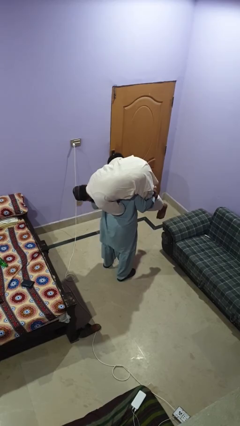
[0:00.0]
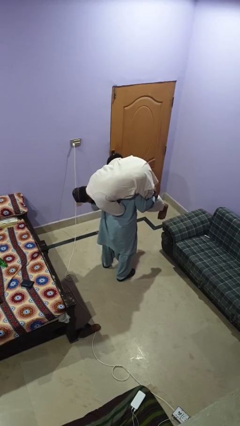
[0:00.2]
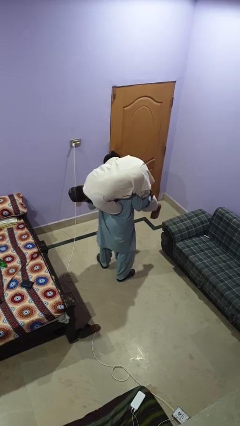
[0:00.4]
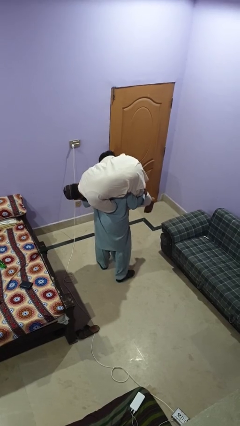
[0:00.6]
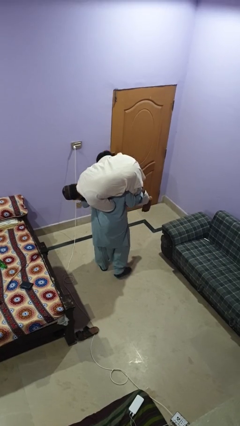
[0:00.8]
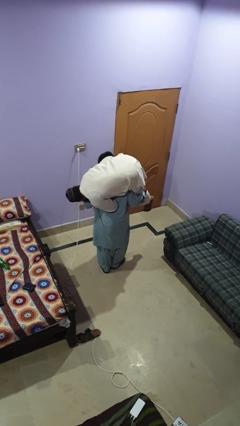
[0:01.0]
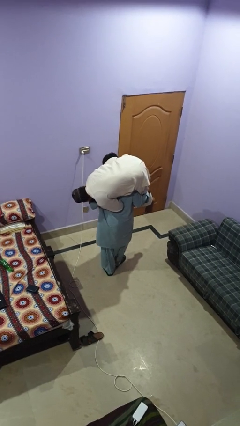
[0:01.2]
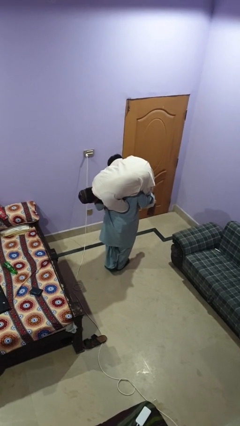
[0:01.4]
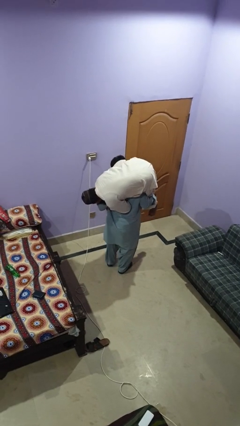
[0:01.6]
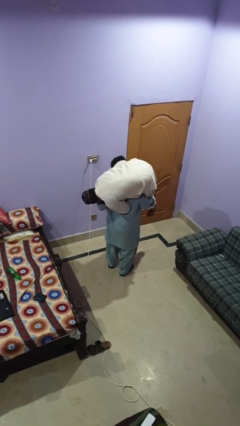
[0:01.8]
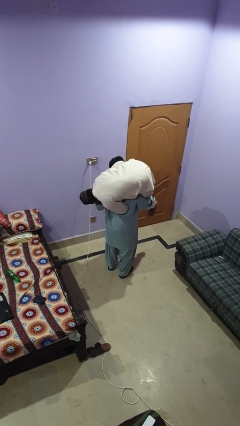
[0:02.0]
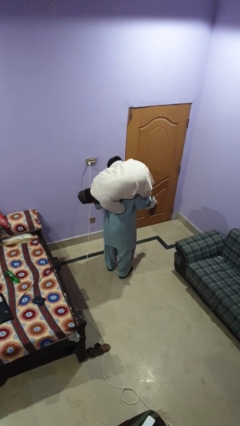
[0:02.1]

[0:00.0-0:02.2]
person carries person on shoulders

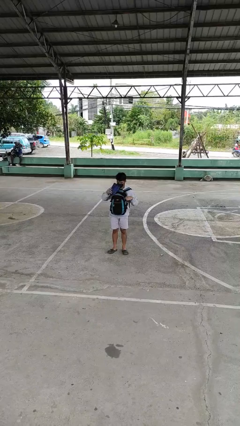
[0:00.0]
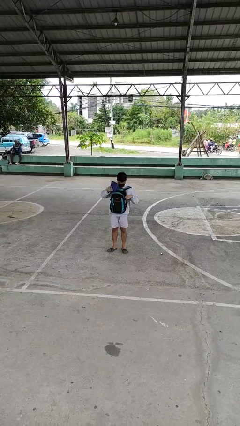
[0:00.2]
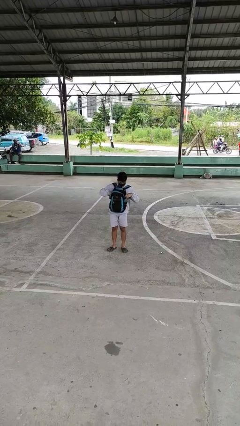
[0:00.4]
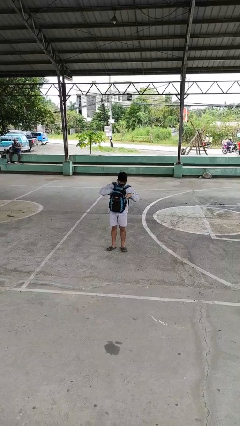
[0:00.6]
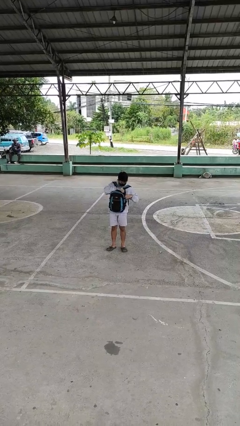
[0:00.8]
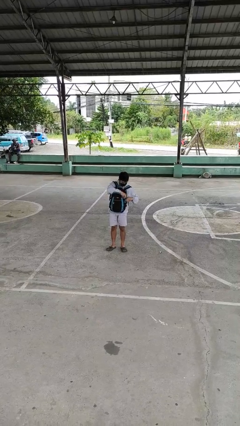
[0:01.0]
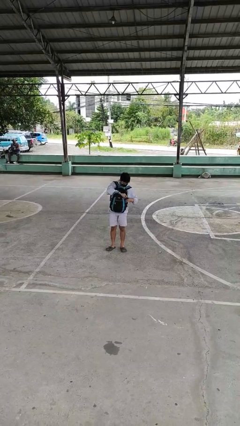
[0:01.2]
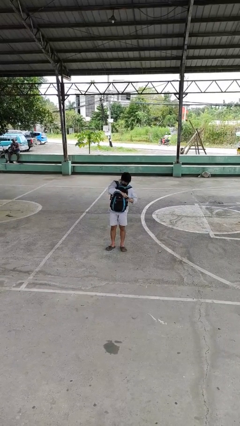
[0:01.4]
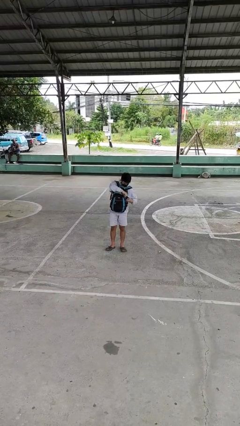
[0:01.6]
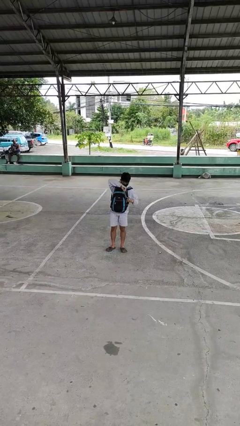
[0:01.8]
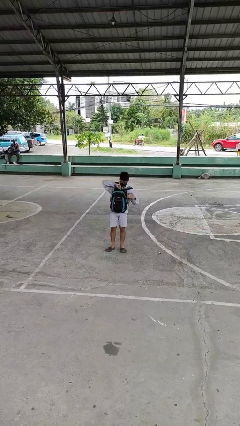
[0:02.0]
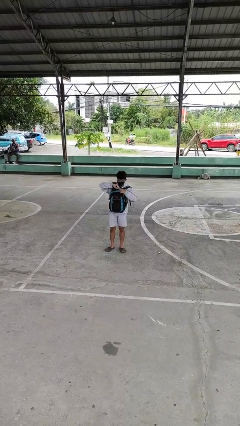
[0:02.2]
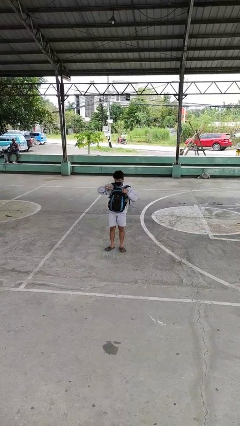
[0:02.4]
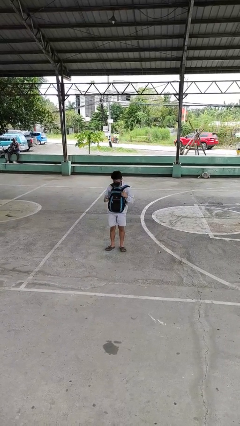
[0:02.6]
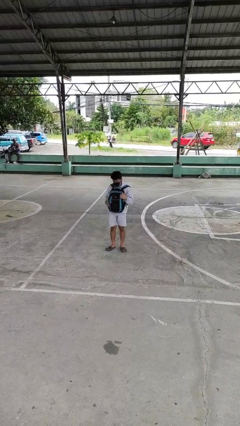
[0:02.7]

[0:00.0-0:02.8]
person puts object into backpack

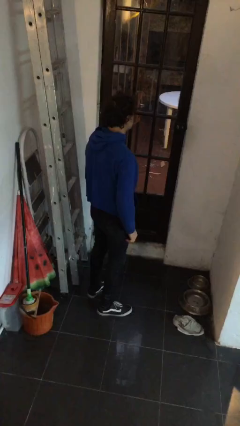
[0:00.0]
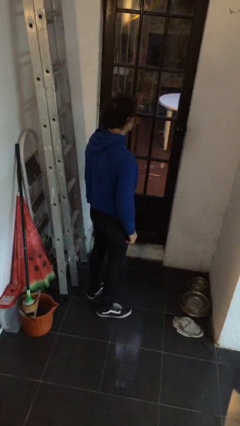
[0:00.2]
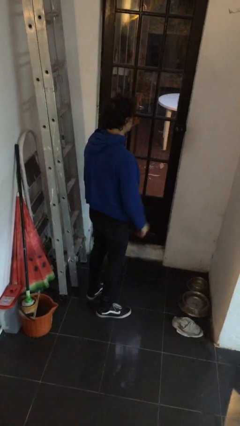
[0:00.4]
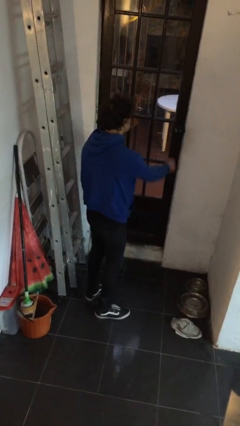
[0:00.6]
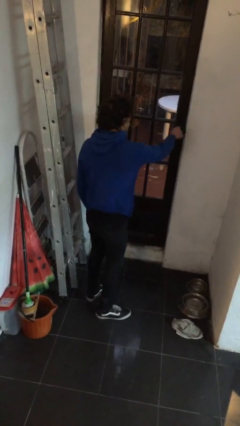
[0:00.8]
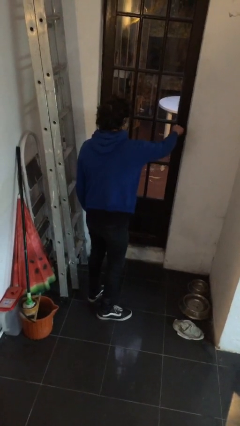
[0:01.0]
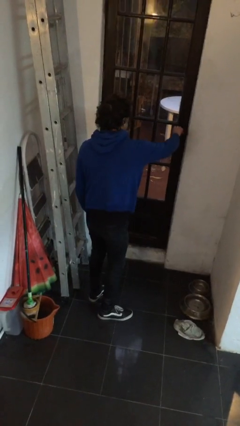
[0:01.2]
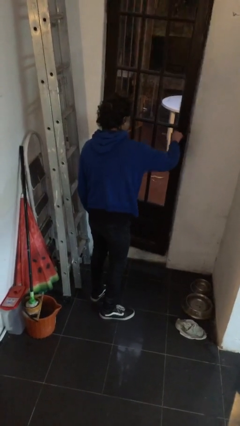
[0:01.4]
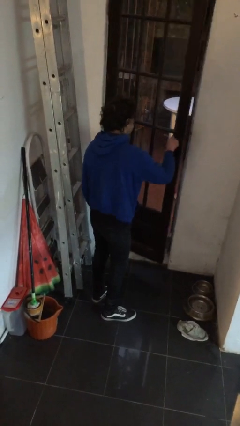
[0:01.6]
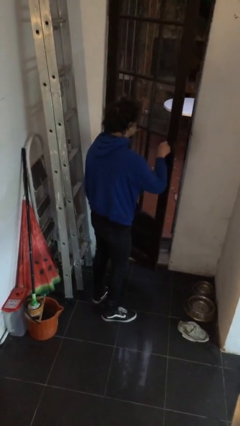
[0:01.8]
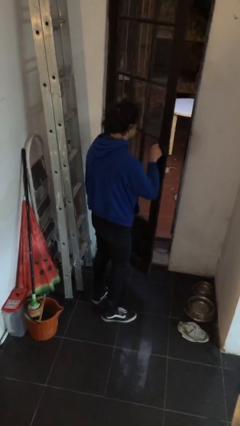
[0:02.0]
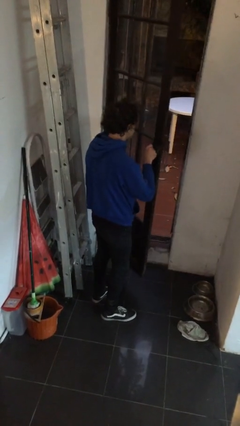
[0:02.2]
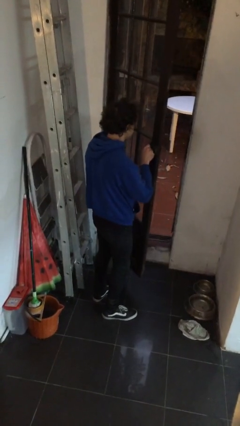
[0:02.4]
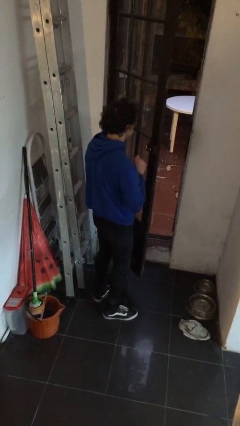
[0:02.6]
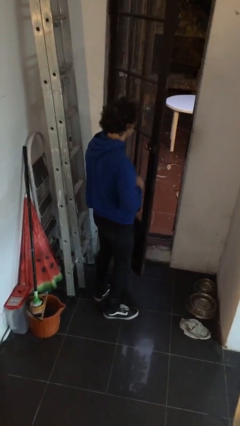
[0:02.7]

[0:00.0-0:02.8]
person opens facility door

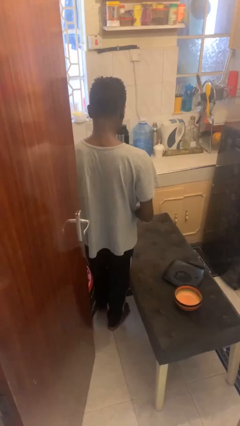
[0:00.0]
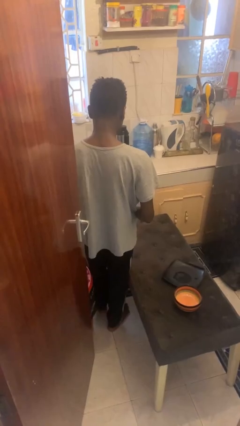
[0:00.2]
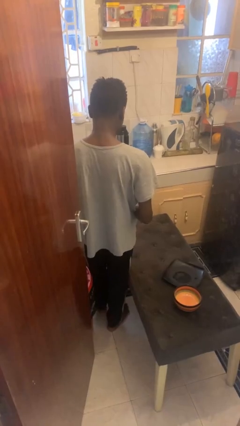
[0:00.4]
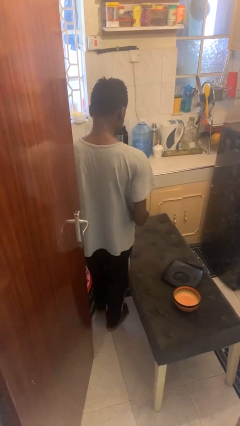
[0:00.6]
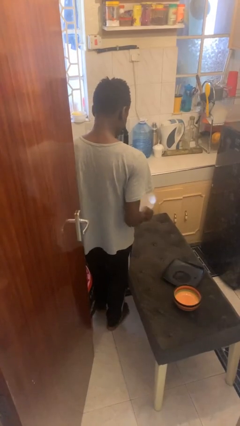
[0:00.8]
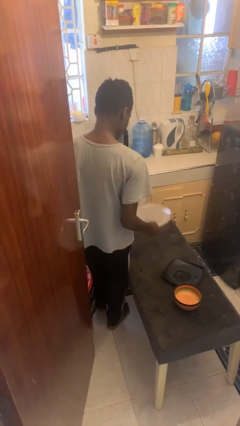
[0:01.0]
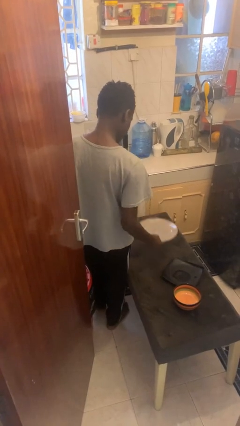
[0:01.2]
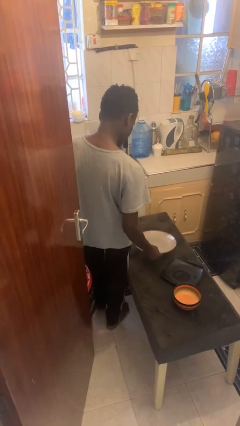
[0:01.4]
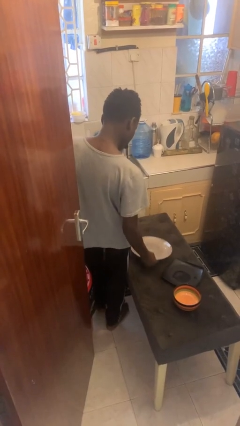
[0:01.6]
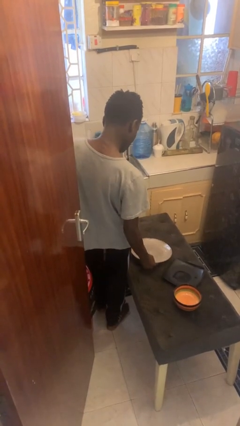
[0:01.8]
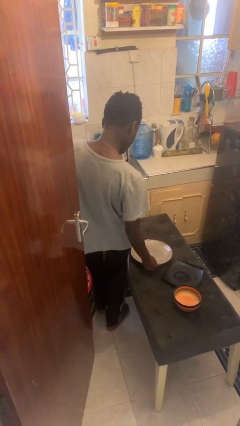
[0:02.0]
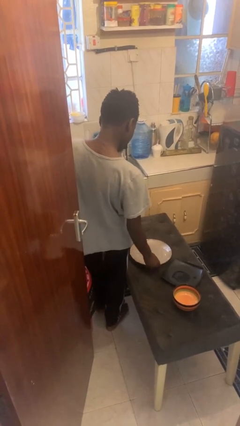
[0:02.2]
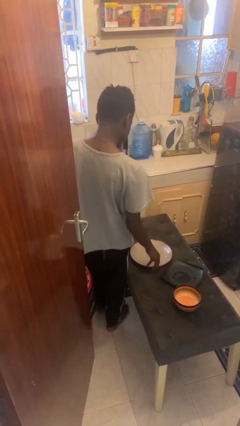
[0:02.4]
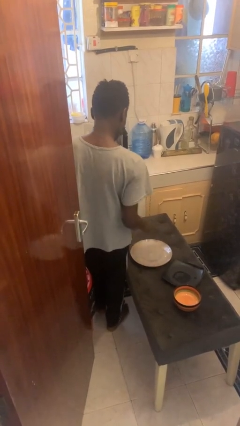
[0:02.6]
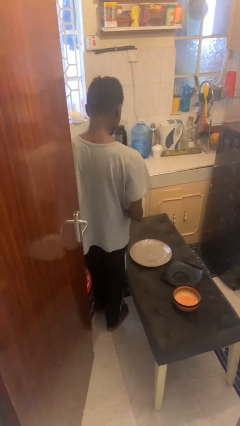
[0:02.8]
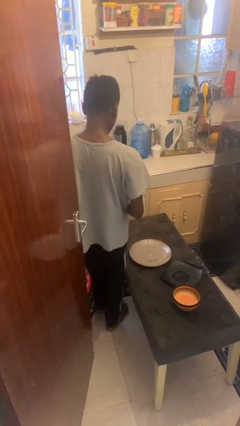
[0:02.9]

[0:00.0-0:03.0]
person sets table

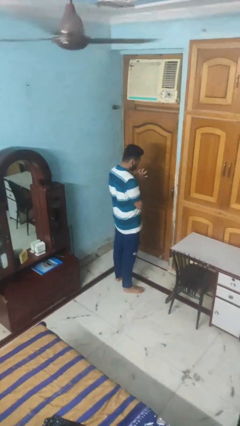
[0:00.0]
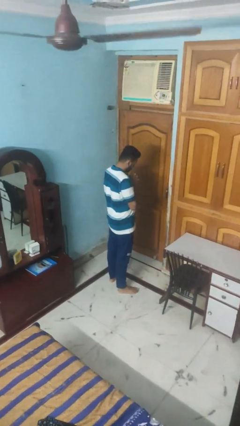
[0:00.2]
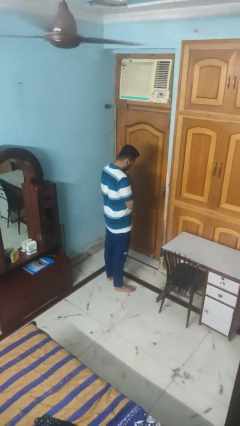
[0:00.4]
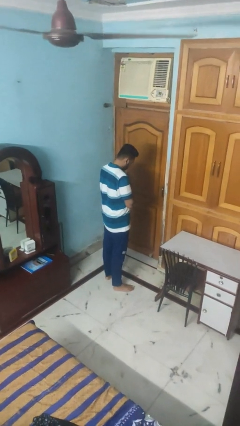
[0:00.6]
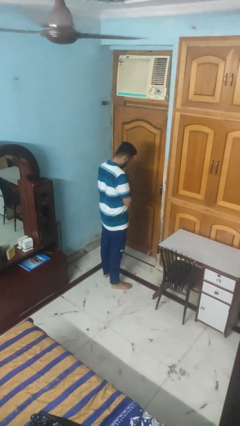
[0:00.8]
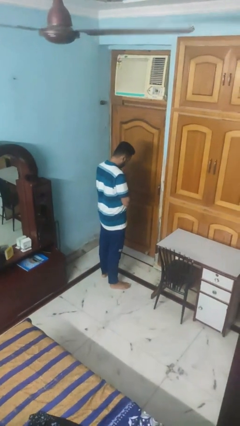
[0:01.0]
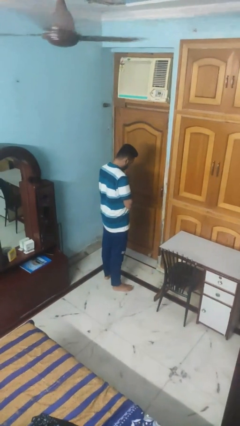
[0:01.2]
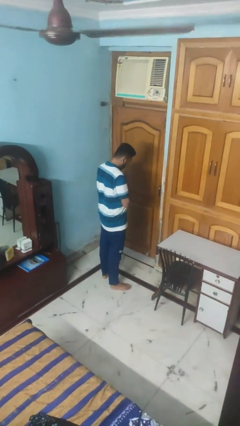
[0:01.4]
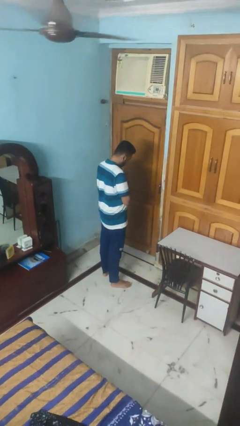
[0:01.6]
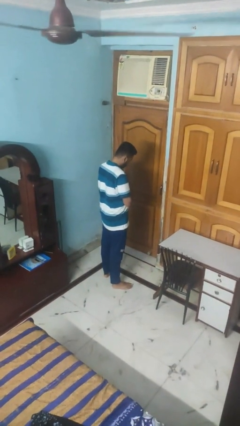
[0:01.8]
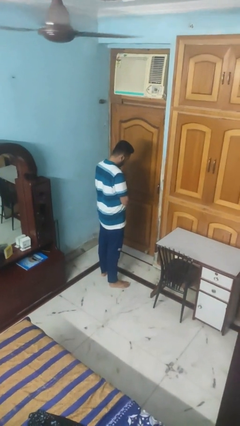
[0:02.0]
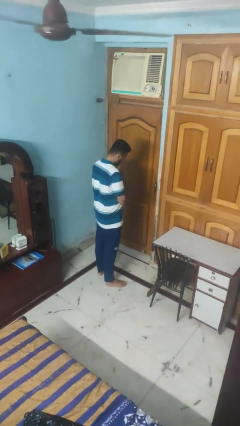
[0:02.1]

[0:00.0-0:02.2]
person prays

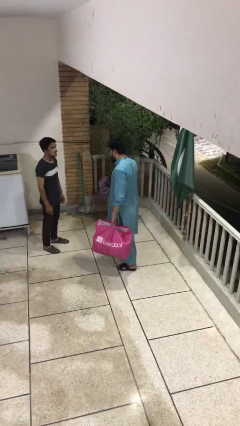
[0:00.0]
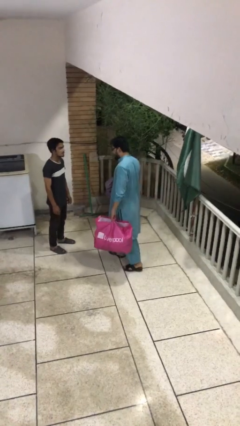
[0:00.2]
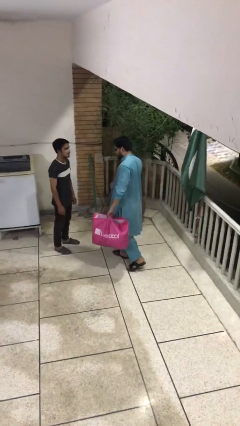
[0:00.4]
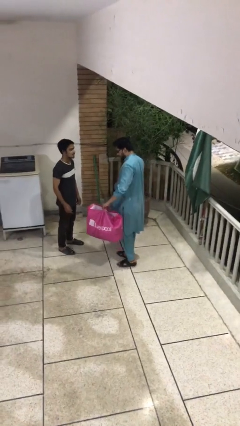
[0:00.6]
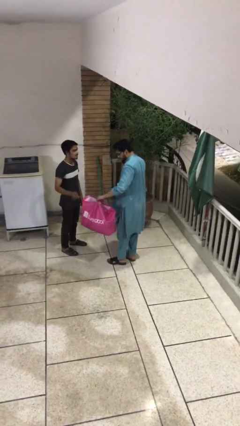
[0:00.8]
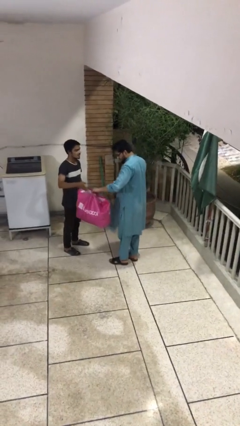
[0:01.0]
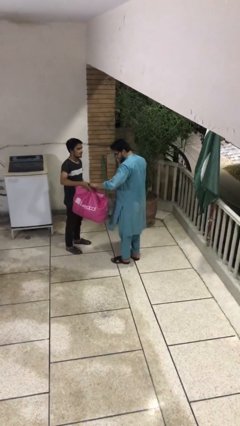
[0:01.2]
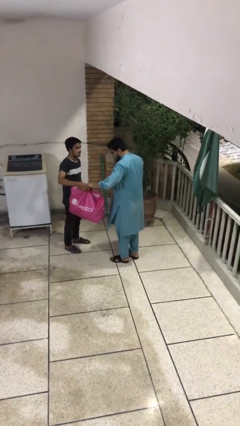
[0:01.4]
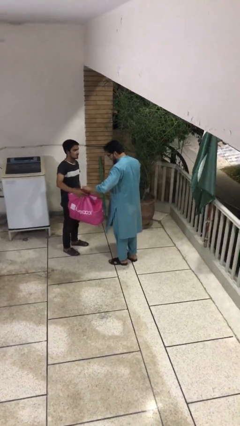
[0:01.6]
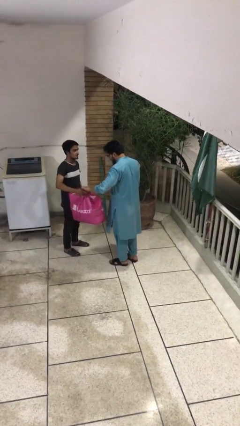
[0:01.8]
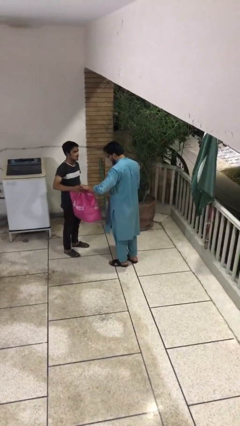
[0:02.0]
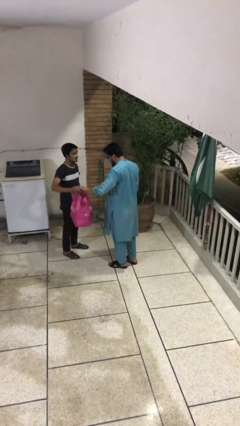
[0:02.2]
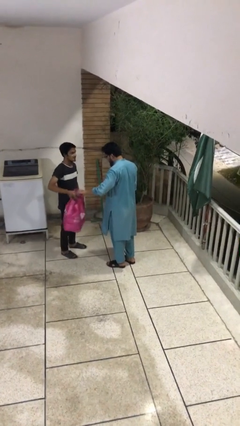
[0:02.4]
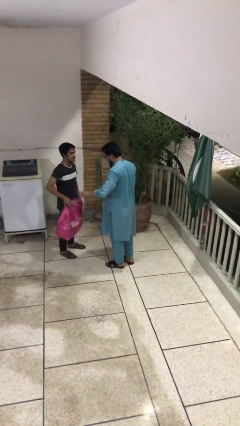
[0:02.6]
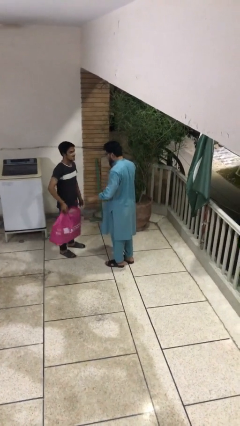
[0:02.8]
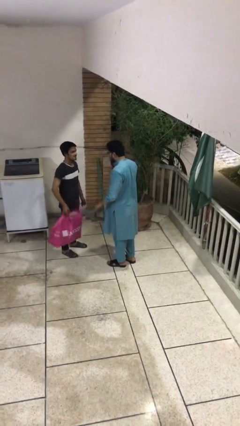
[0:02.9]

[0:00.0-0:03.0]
person transfers object to person

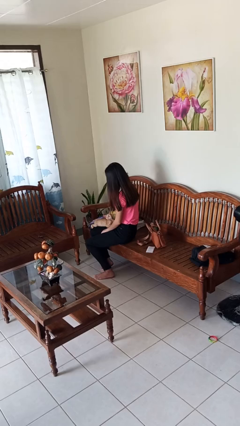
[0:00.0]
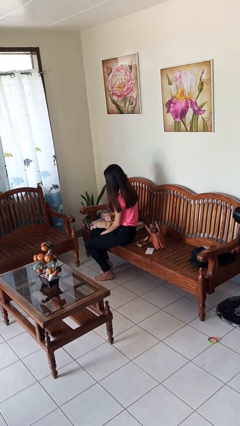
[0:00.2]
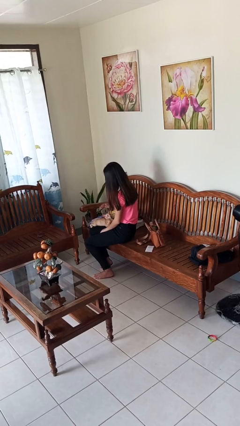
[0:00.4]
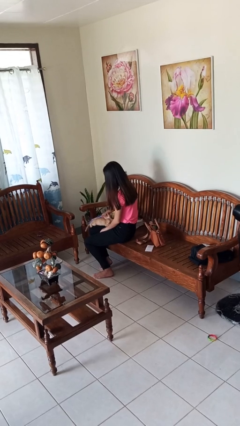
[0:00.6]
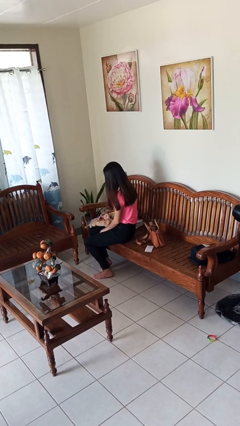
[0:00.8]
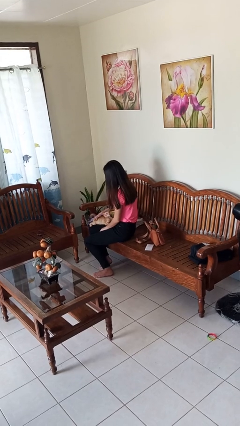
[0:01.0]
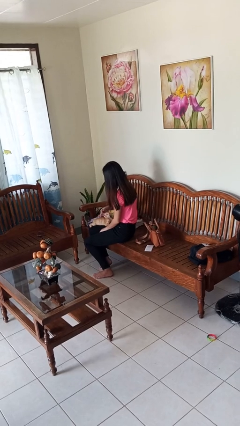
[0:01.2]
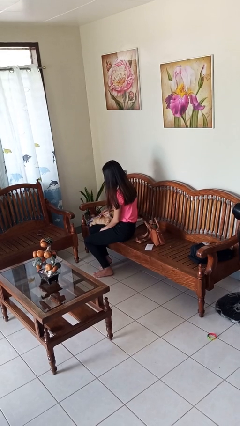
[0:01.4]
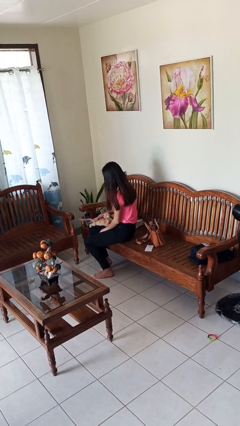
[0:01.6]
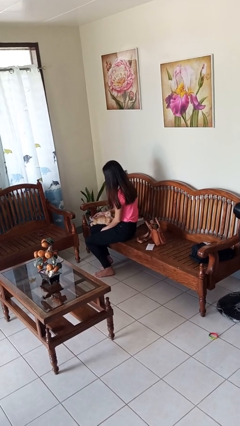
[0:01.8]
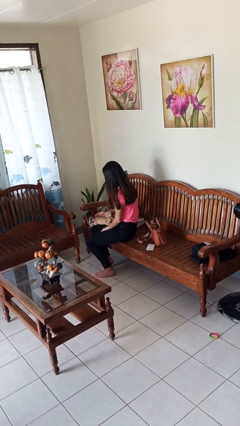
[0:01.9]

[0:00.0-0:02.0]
person pets cat
